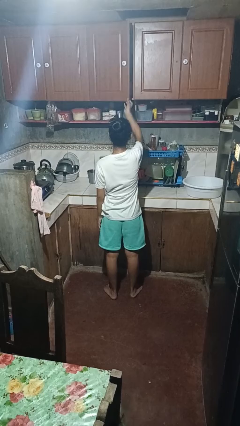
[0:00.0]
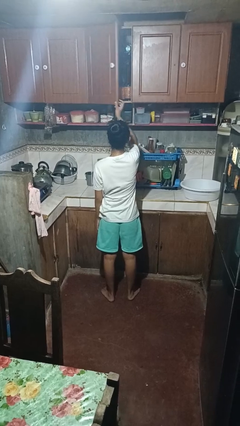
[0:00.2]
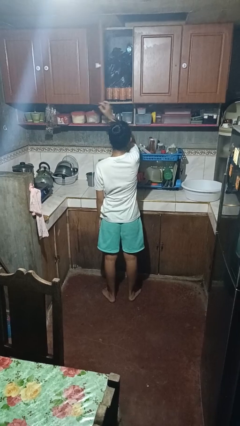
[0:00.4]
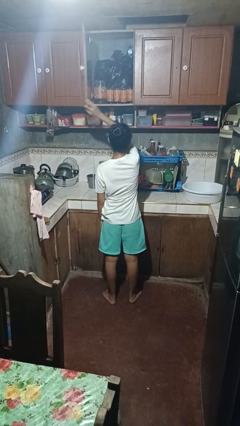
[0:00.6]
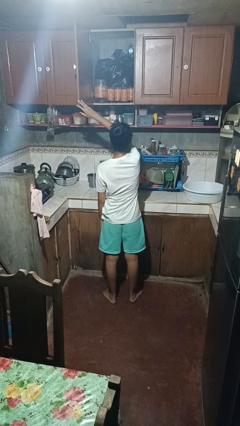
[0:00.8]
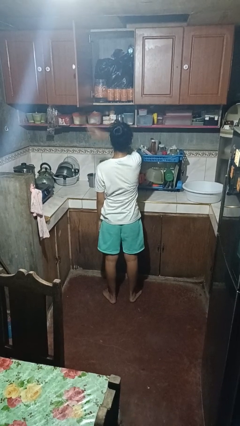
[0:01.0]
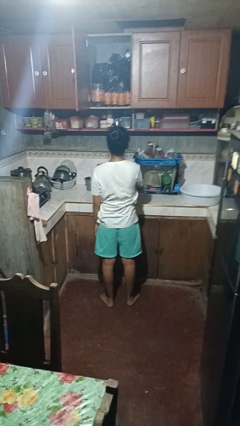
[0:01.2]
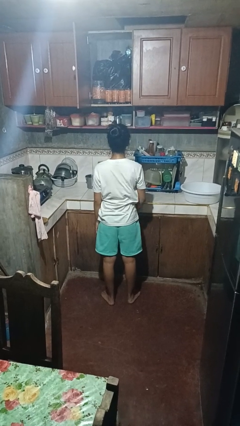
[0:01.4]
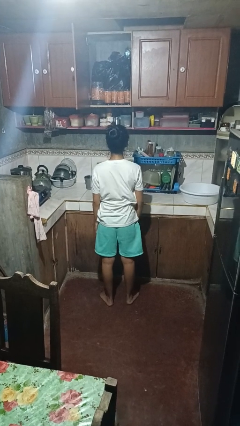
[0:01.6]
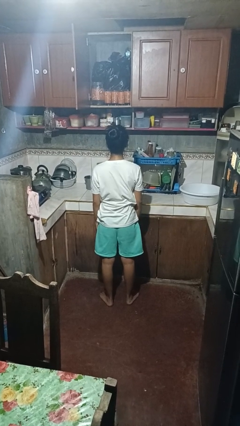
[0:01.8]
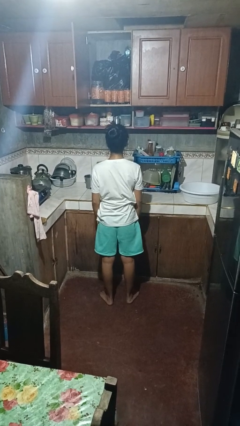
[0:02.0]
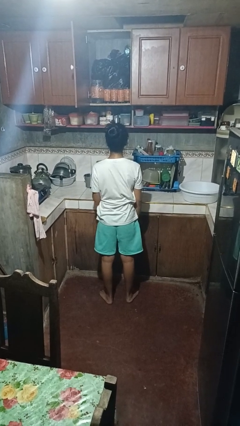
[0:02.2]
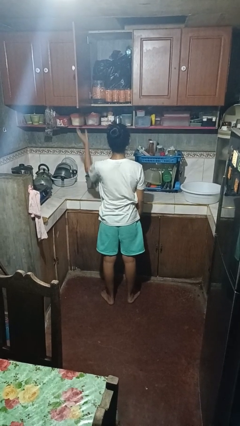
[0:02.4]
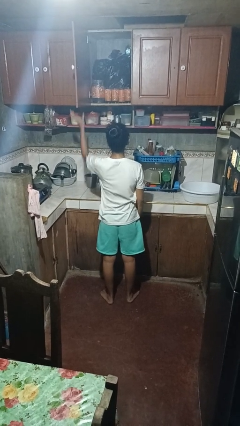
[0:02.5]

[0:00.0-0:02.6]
person opens cabinet

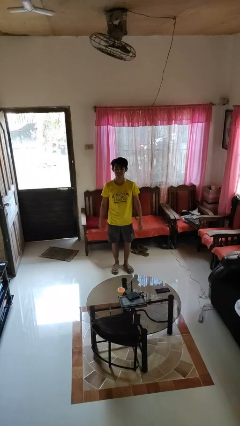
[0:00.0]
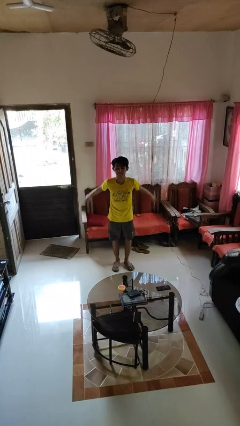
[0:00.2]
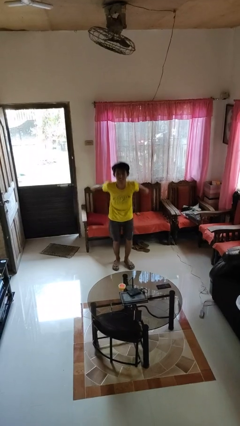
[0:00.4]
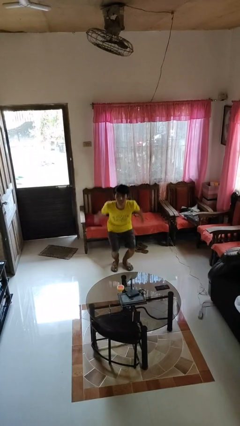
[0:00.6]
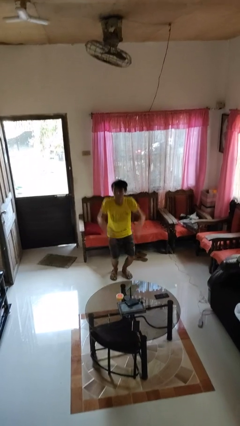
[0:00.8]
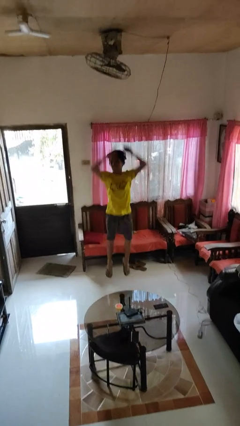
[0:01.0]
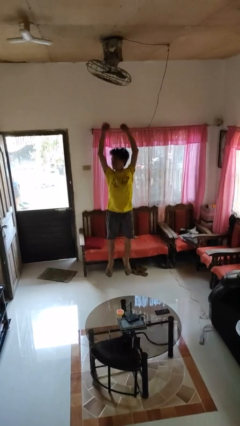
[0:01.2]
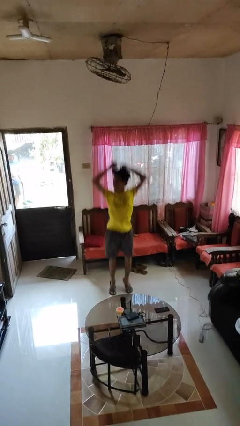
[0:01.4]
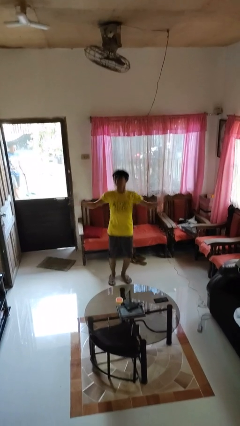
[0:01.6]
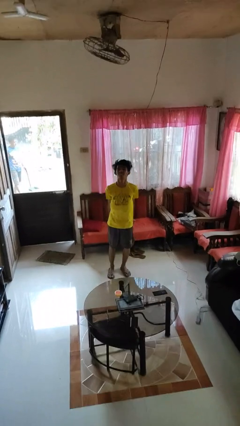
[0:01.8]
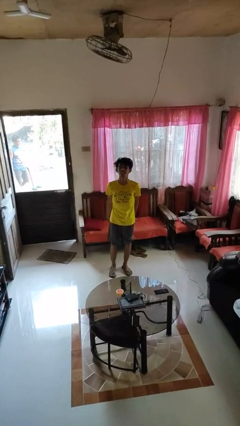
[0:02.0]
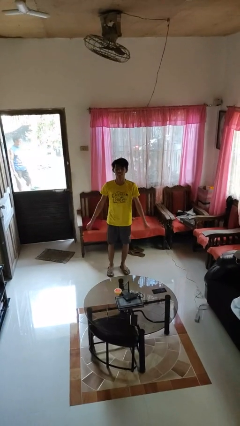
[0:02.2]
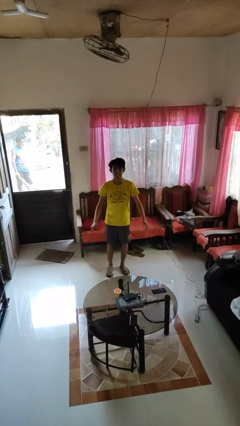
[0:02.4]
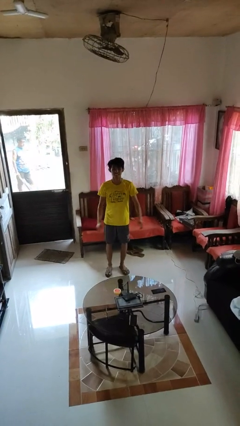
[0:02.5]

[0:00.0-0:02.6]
person jumps

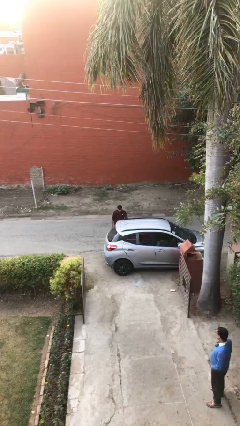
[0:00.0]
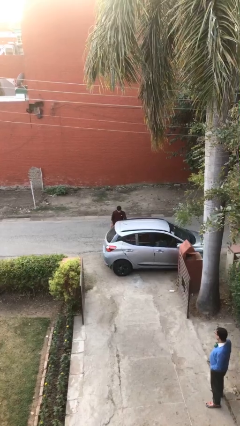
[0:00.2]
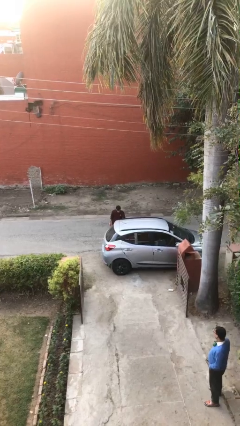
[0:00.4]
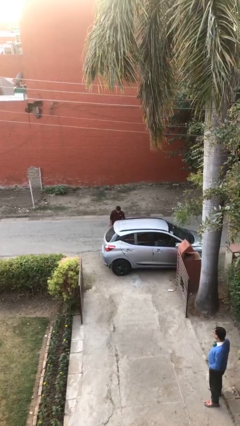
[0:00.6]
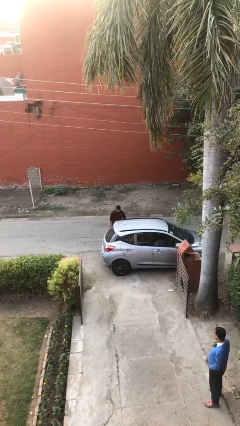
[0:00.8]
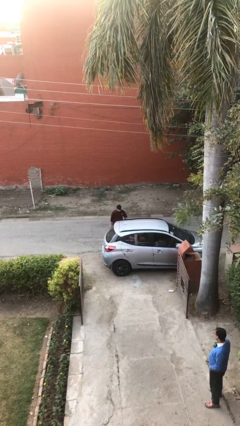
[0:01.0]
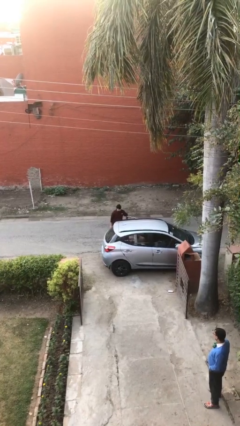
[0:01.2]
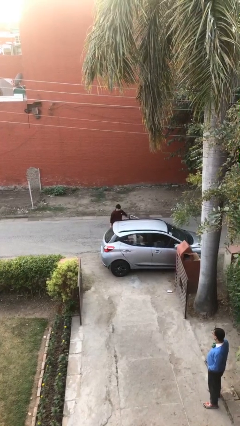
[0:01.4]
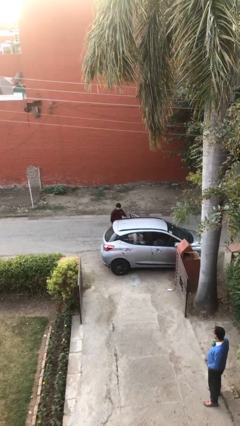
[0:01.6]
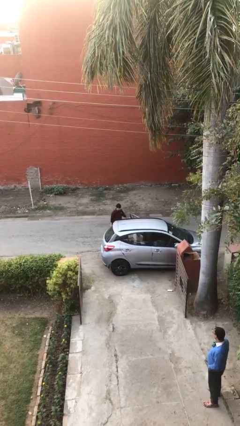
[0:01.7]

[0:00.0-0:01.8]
person opens car door

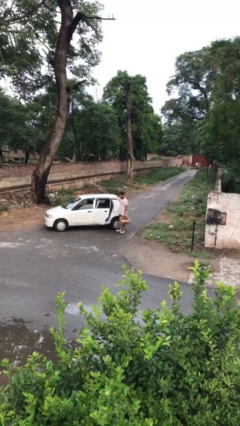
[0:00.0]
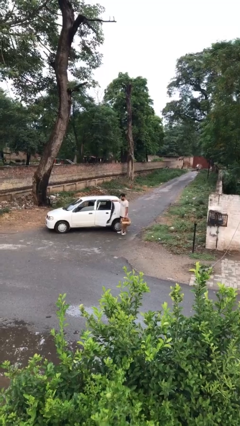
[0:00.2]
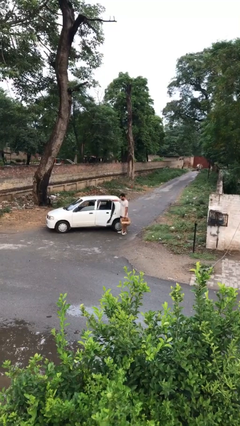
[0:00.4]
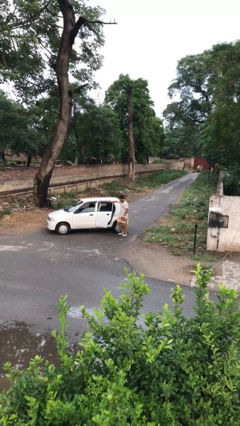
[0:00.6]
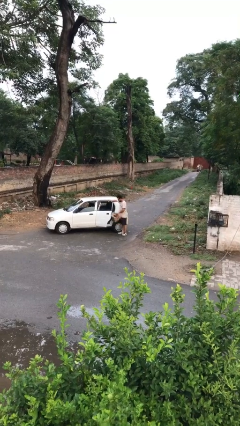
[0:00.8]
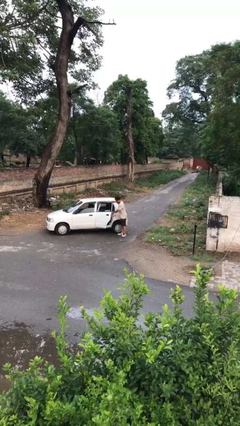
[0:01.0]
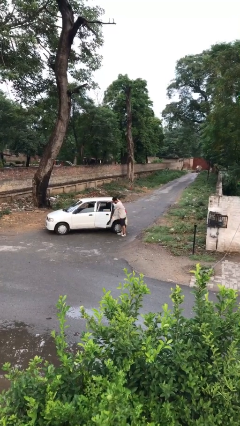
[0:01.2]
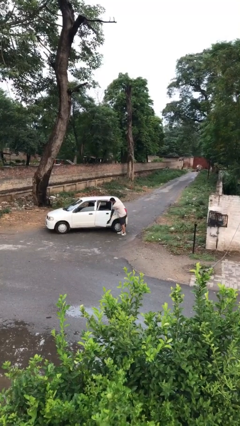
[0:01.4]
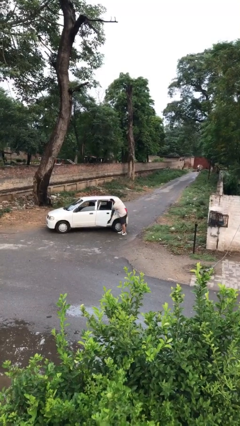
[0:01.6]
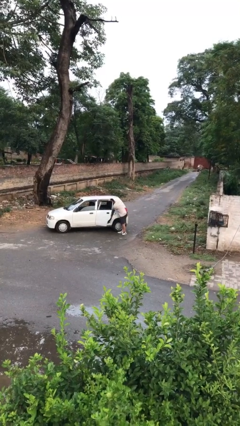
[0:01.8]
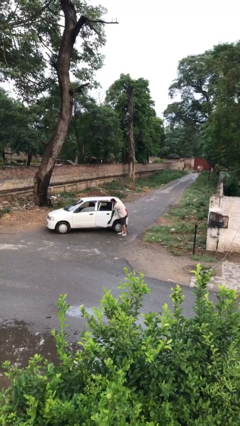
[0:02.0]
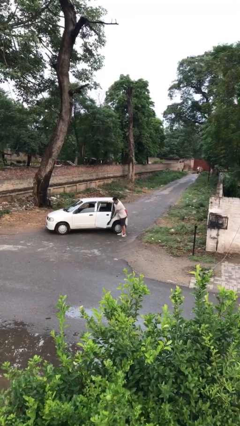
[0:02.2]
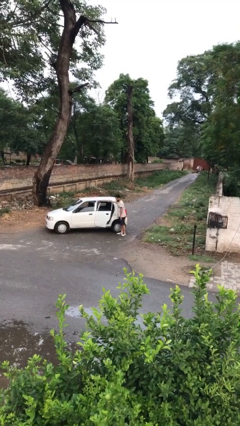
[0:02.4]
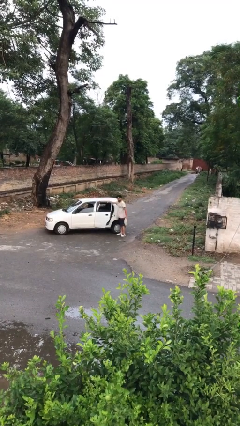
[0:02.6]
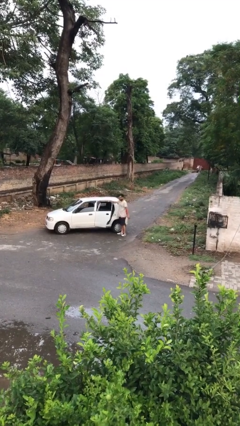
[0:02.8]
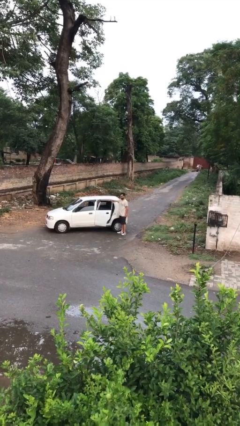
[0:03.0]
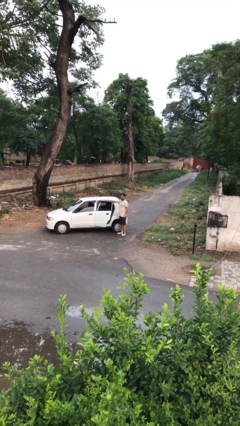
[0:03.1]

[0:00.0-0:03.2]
person loads car

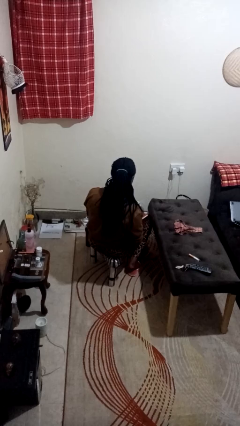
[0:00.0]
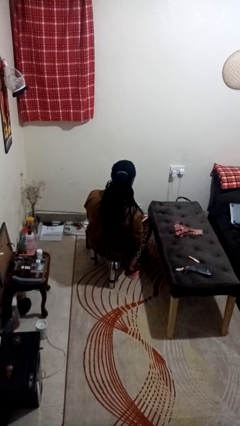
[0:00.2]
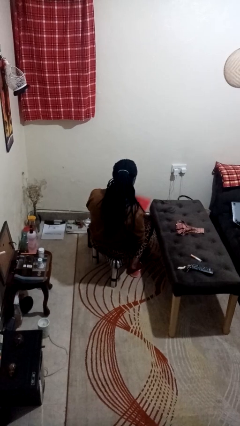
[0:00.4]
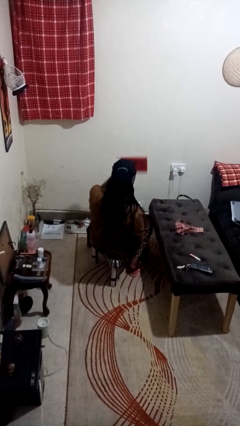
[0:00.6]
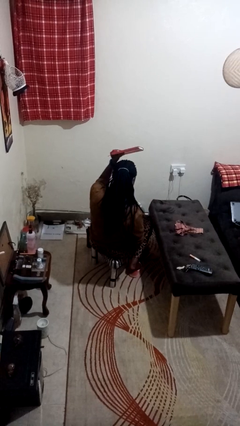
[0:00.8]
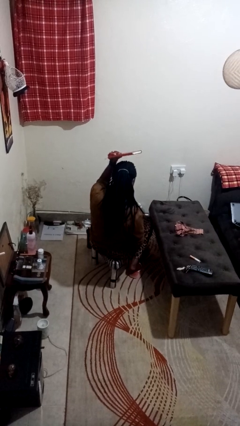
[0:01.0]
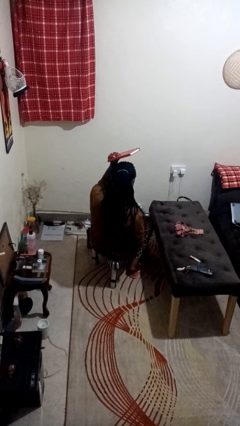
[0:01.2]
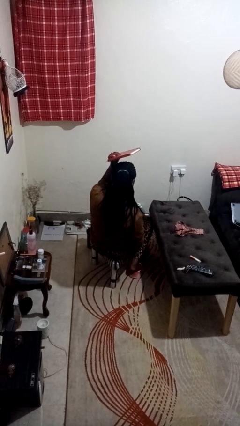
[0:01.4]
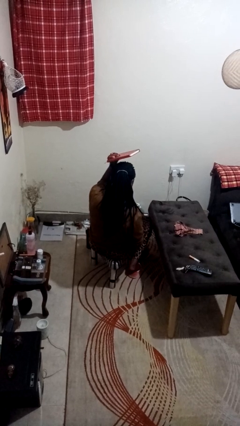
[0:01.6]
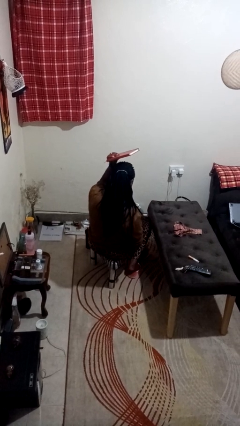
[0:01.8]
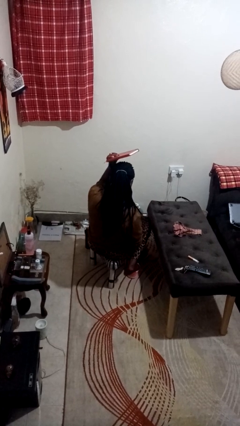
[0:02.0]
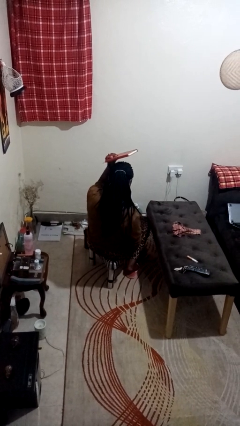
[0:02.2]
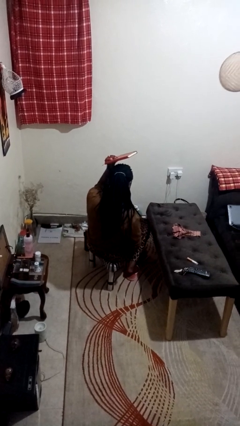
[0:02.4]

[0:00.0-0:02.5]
person holds object above head

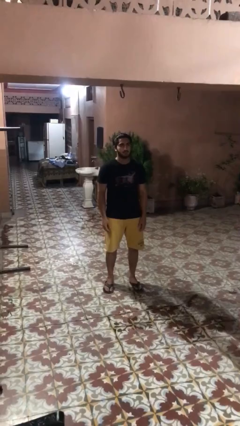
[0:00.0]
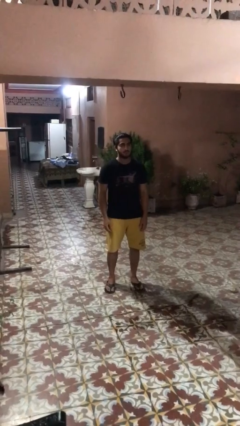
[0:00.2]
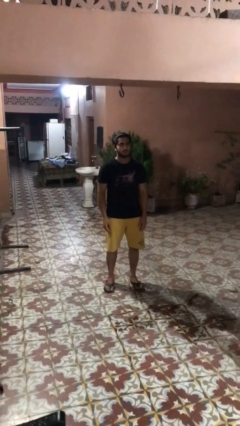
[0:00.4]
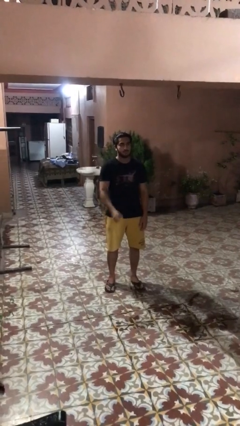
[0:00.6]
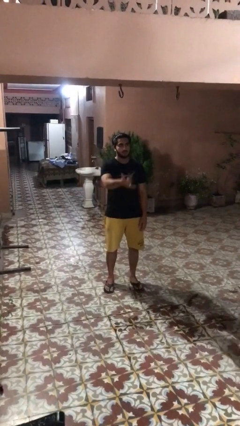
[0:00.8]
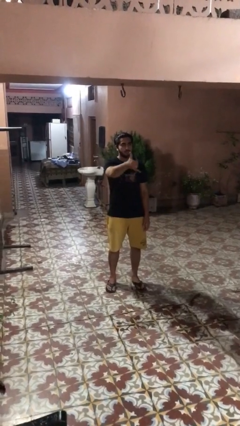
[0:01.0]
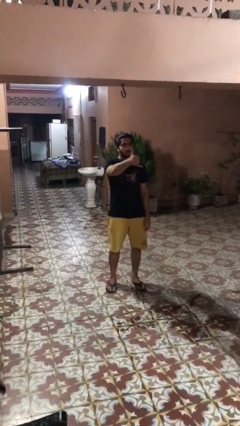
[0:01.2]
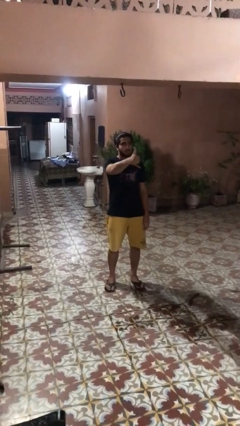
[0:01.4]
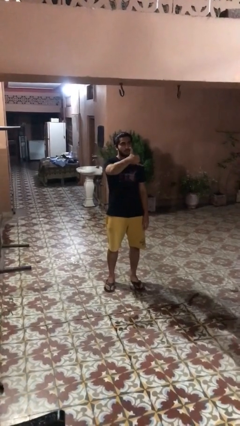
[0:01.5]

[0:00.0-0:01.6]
person gestures hang loose

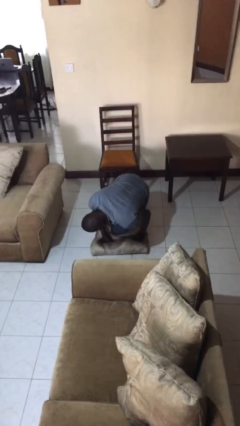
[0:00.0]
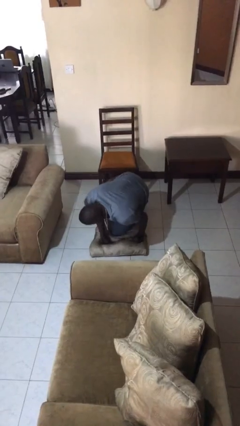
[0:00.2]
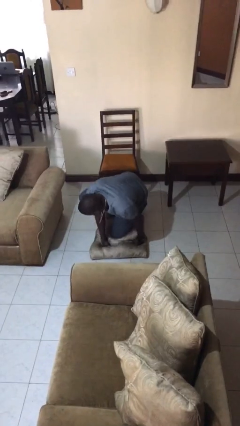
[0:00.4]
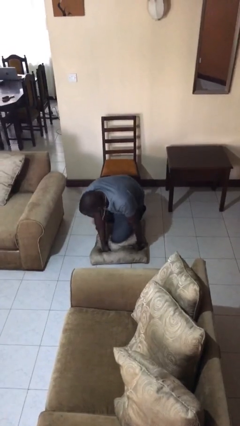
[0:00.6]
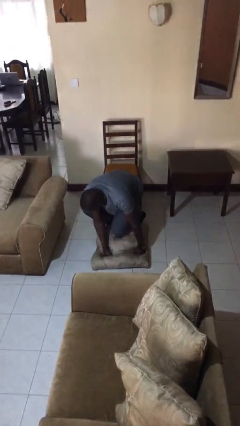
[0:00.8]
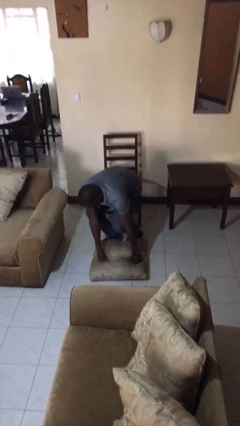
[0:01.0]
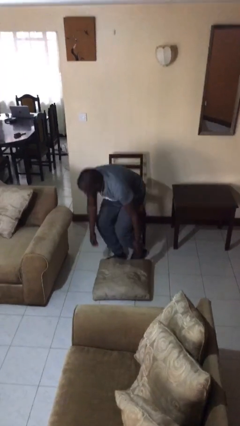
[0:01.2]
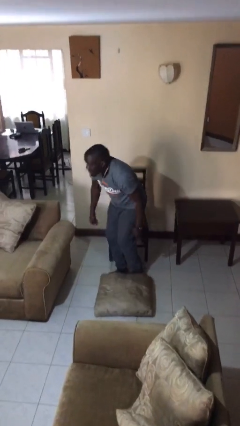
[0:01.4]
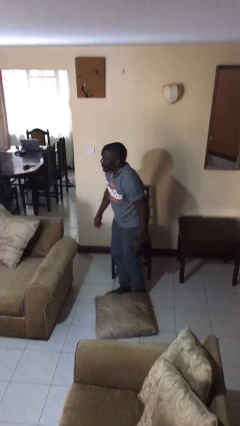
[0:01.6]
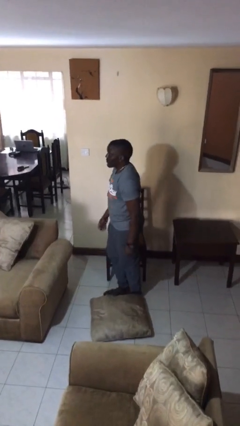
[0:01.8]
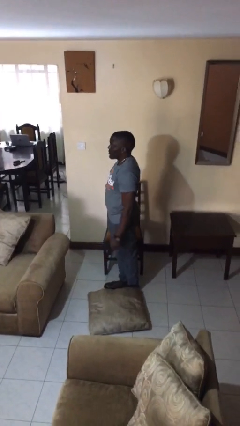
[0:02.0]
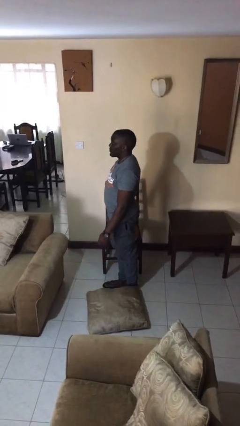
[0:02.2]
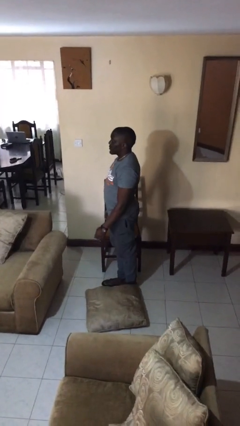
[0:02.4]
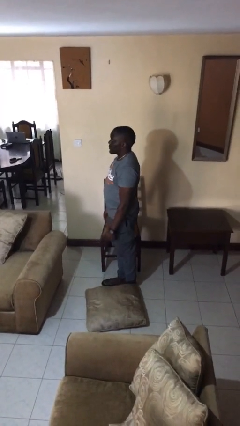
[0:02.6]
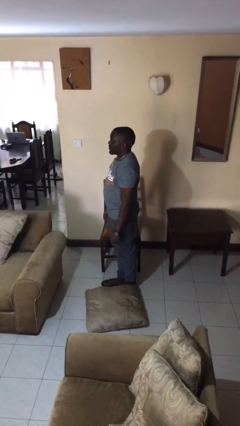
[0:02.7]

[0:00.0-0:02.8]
person stands up from floor
